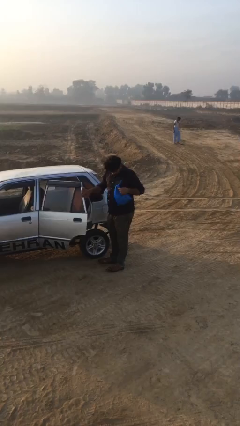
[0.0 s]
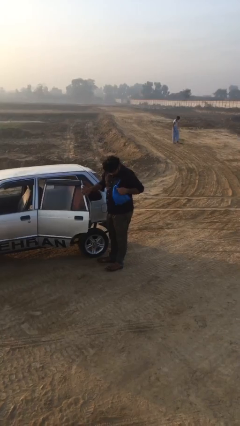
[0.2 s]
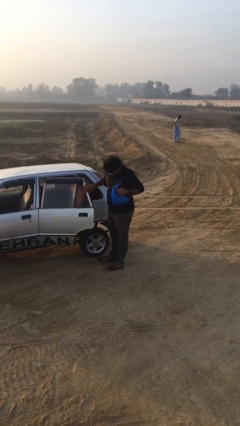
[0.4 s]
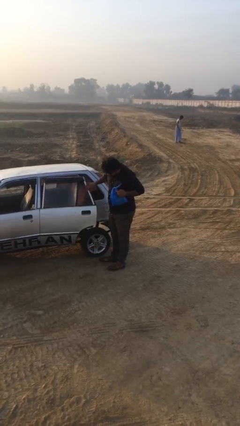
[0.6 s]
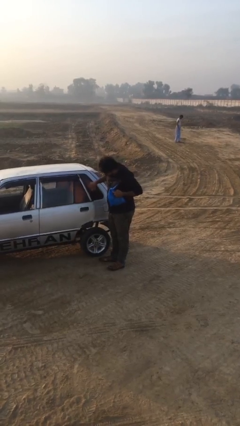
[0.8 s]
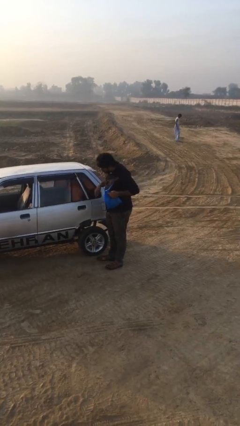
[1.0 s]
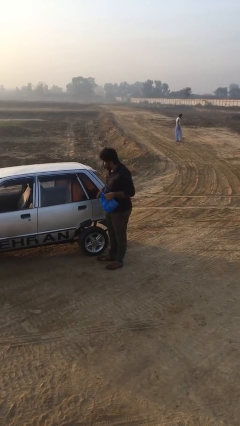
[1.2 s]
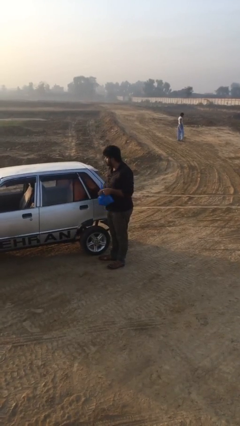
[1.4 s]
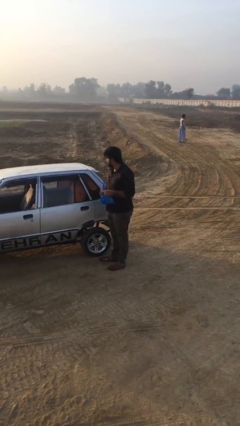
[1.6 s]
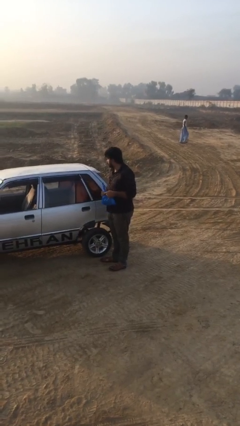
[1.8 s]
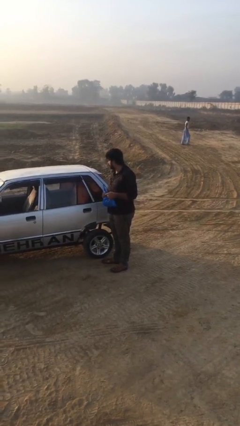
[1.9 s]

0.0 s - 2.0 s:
person closes car door

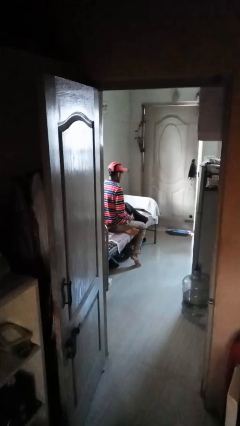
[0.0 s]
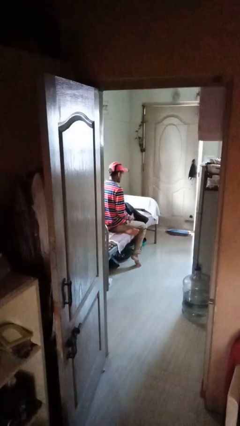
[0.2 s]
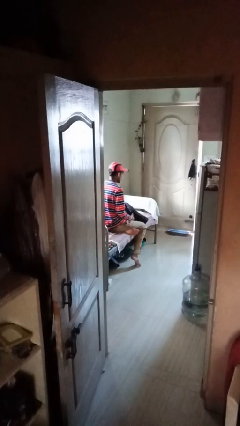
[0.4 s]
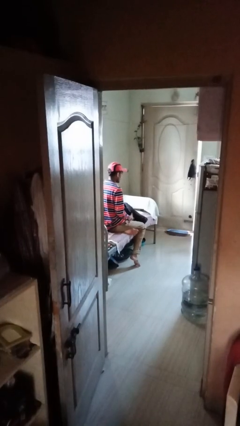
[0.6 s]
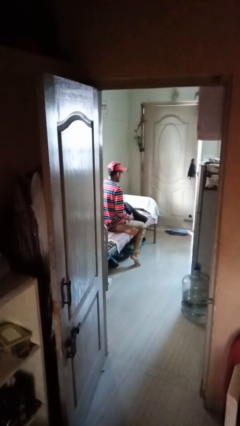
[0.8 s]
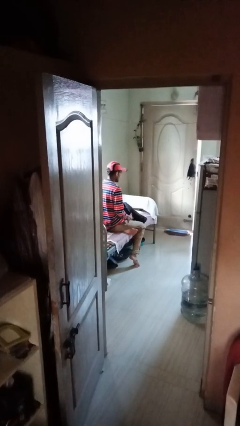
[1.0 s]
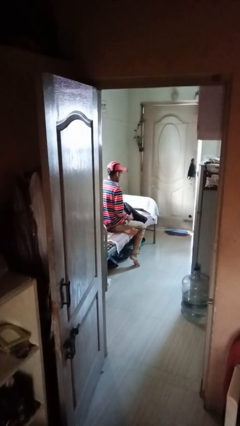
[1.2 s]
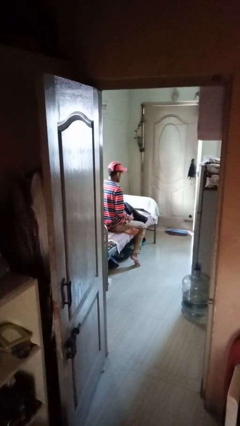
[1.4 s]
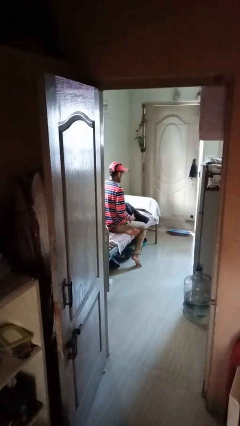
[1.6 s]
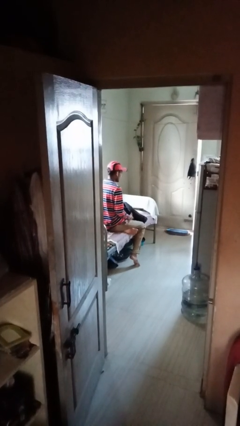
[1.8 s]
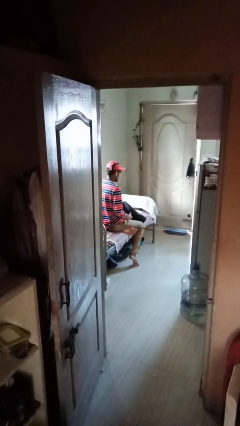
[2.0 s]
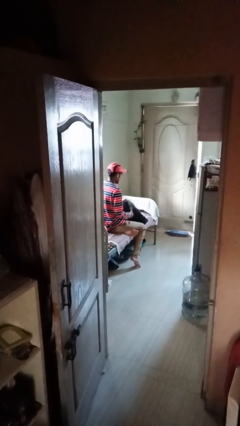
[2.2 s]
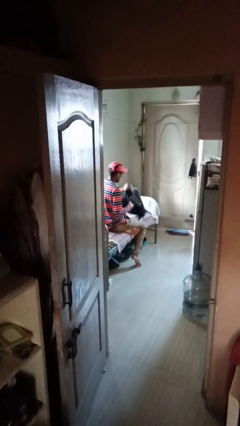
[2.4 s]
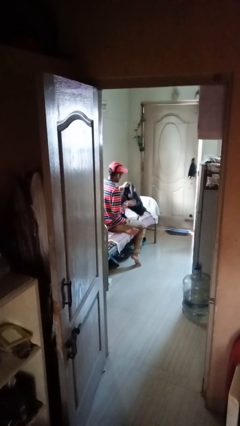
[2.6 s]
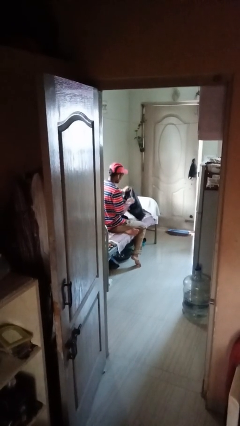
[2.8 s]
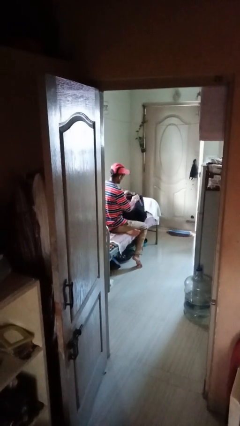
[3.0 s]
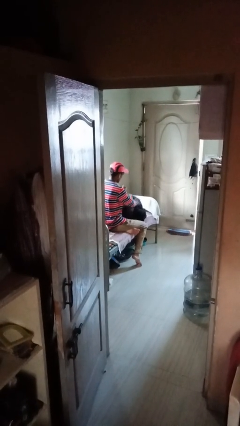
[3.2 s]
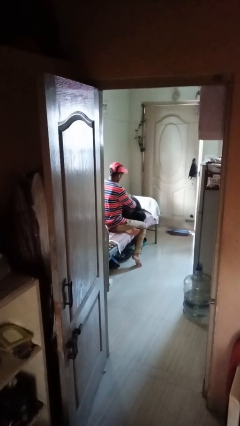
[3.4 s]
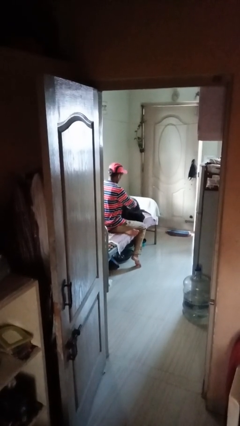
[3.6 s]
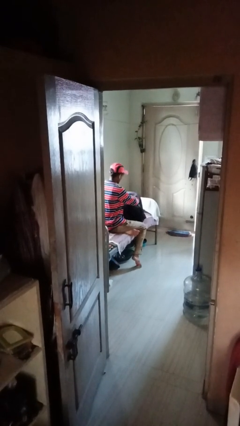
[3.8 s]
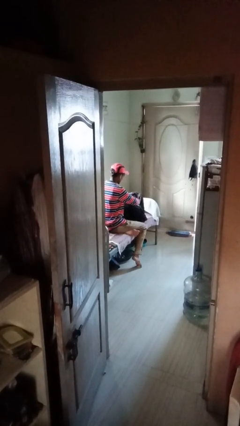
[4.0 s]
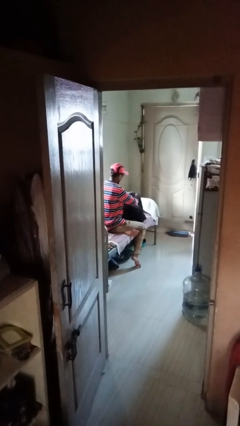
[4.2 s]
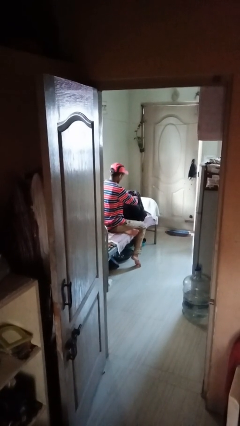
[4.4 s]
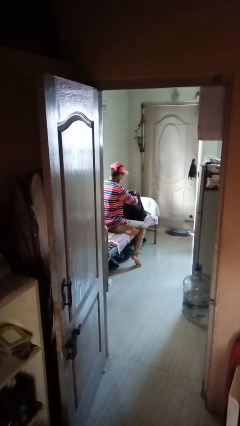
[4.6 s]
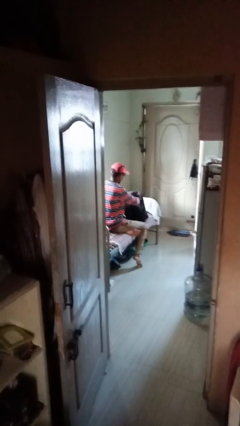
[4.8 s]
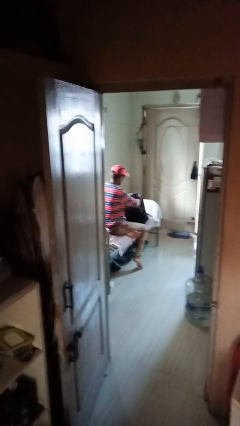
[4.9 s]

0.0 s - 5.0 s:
person searches in backpack

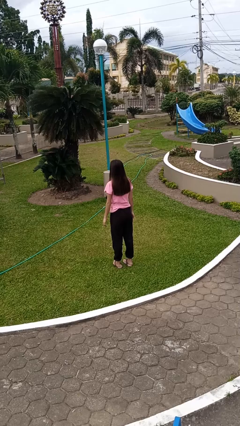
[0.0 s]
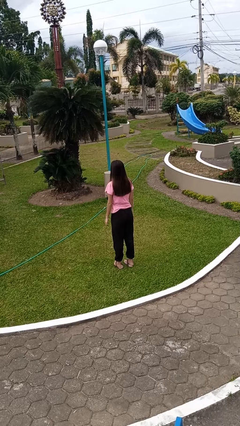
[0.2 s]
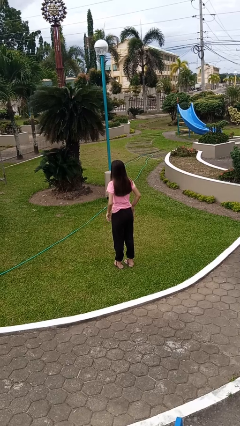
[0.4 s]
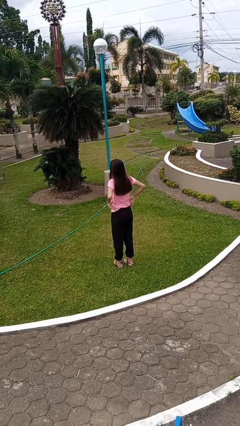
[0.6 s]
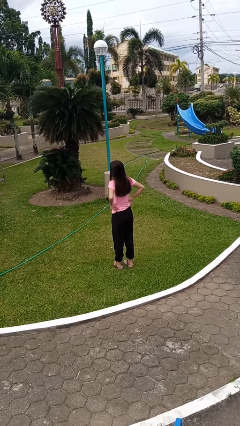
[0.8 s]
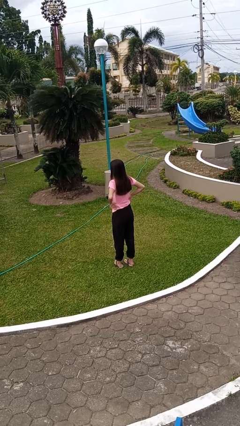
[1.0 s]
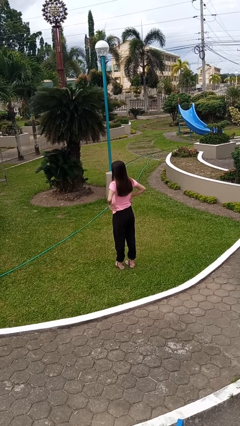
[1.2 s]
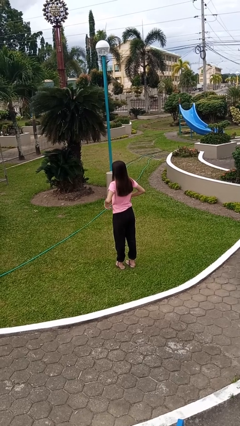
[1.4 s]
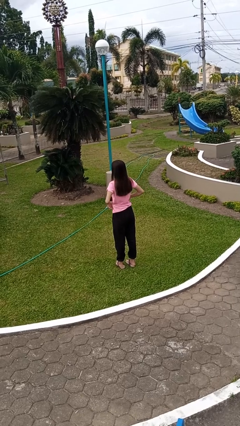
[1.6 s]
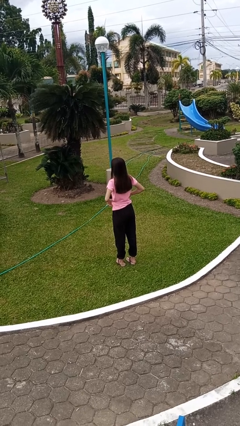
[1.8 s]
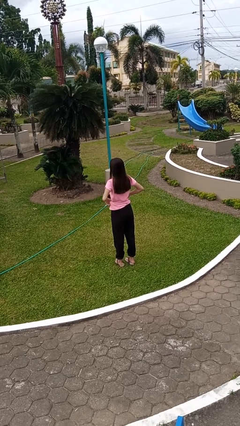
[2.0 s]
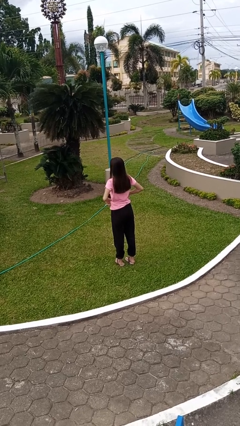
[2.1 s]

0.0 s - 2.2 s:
person hikes up pants

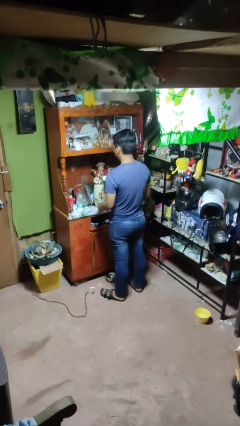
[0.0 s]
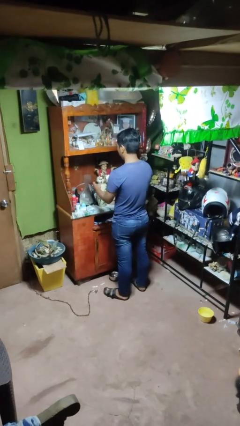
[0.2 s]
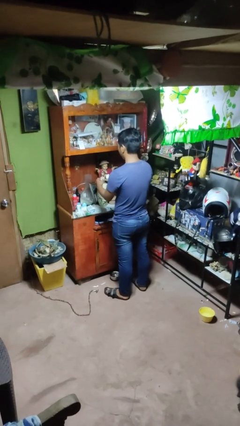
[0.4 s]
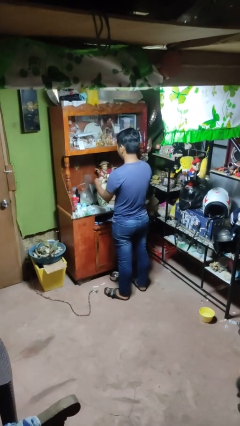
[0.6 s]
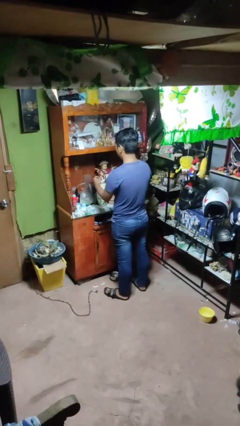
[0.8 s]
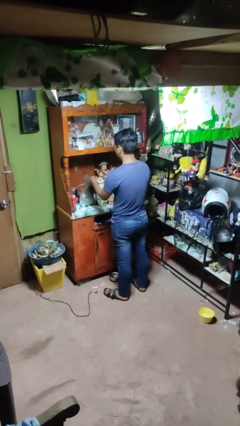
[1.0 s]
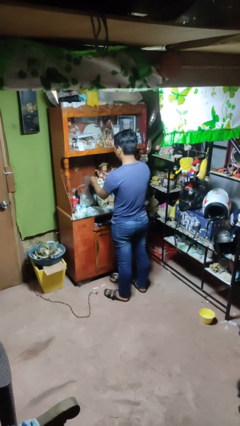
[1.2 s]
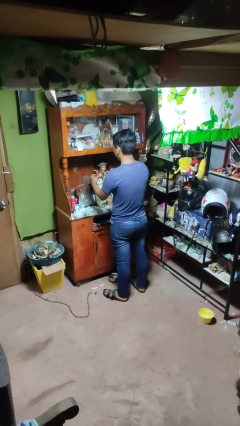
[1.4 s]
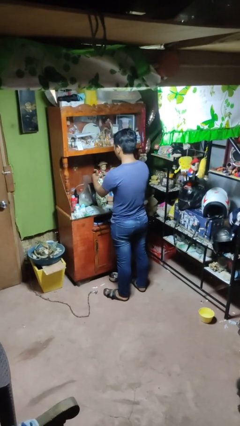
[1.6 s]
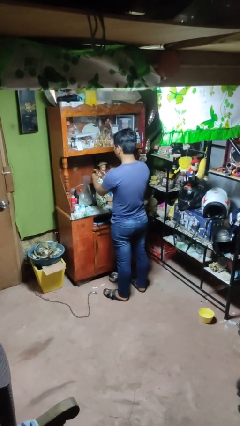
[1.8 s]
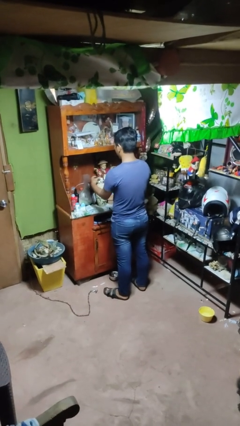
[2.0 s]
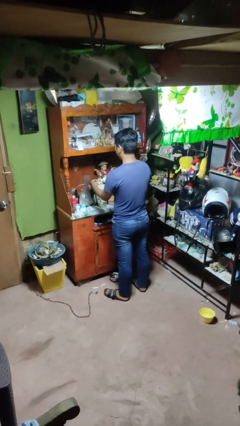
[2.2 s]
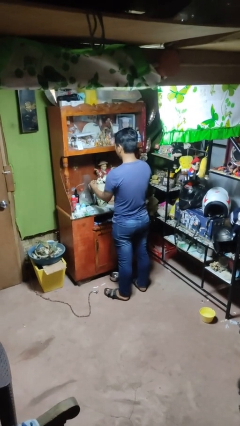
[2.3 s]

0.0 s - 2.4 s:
person arranges flowers in vase

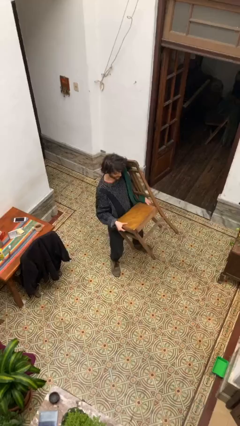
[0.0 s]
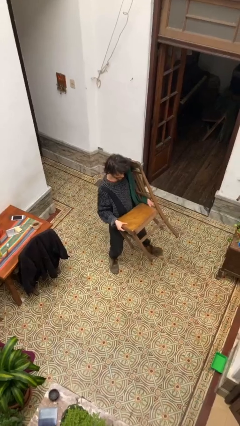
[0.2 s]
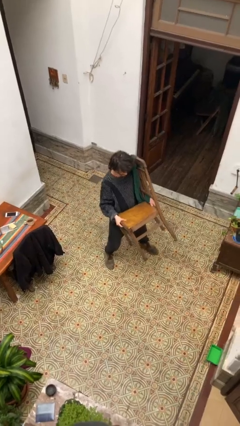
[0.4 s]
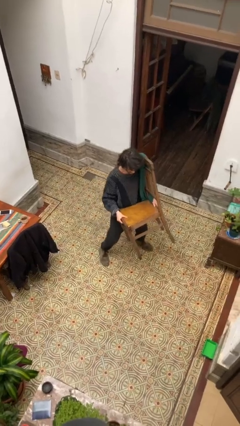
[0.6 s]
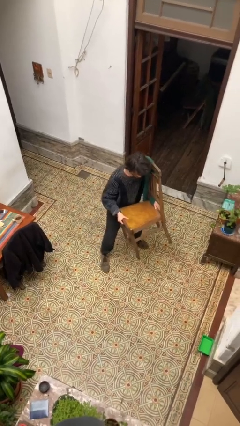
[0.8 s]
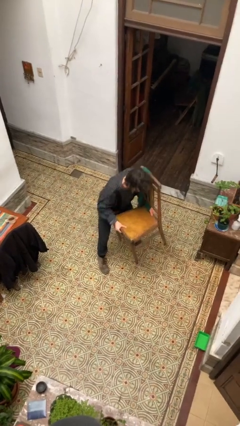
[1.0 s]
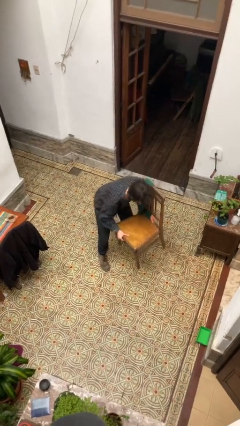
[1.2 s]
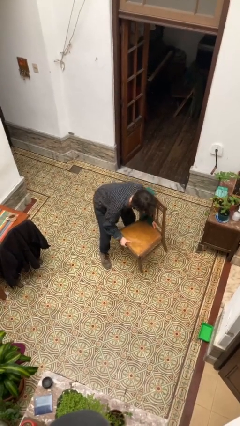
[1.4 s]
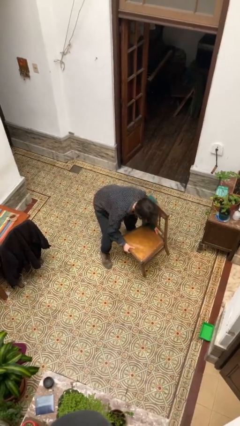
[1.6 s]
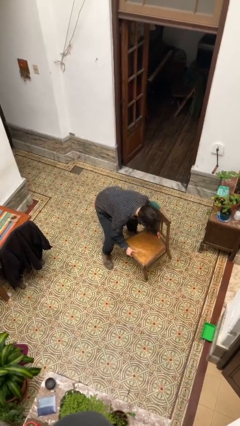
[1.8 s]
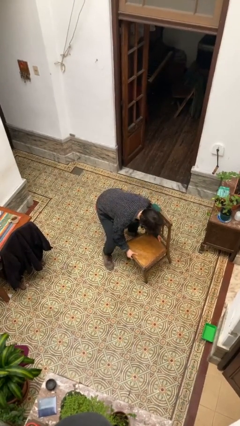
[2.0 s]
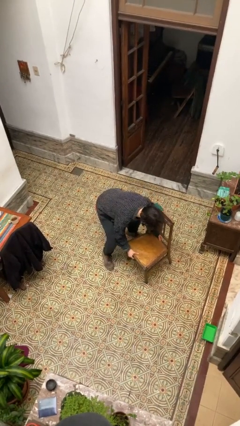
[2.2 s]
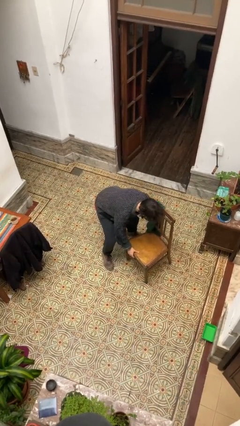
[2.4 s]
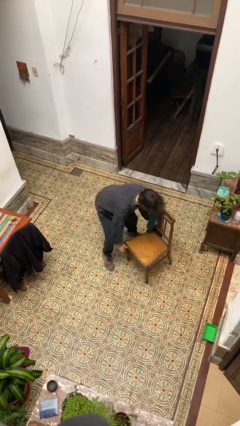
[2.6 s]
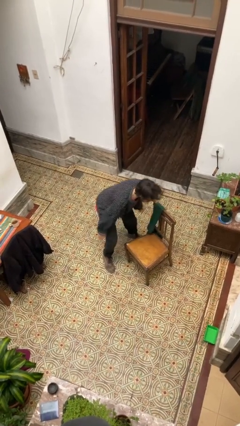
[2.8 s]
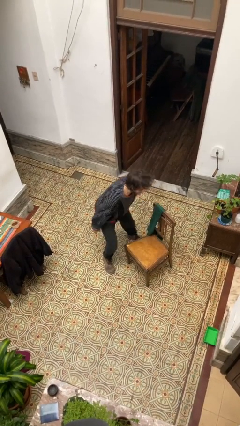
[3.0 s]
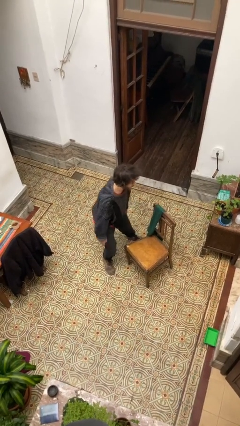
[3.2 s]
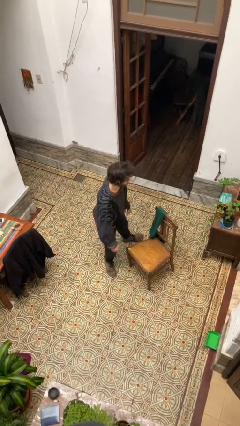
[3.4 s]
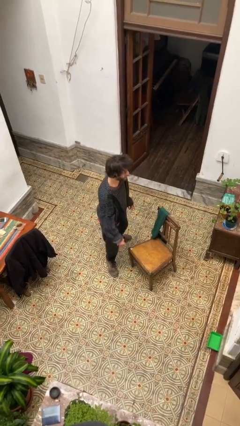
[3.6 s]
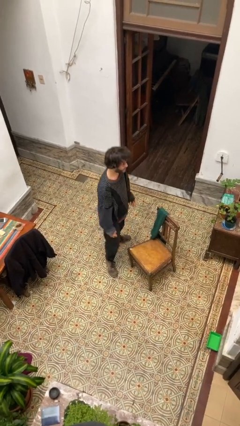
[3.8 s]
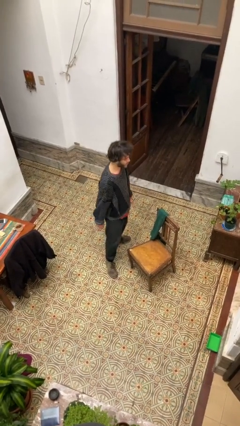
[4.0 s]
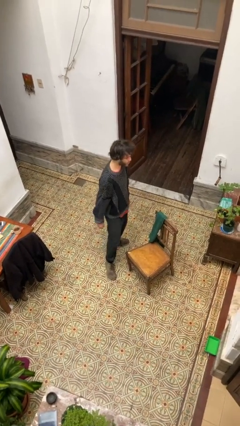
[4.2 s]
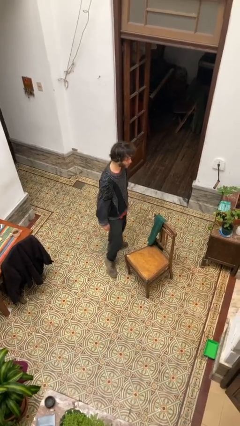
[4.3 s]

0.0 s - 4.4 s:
person puts down object on floor

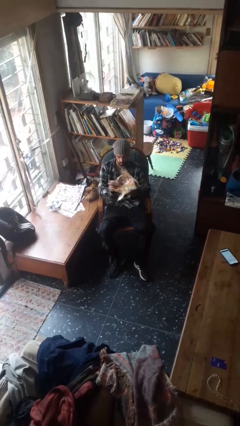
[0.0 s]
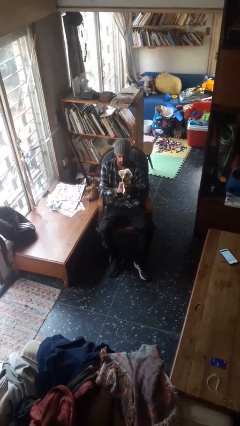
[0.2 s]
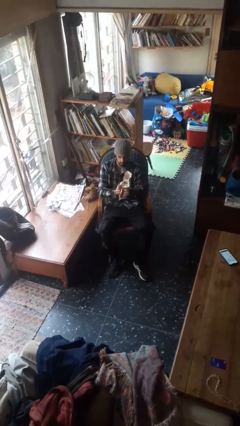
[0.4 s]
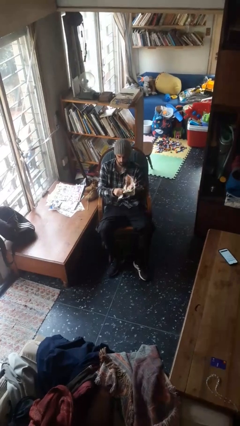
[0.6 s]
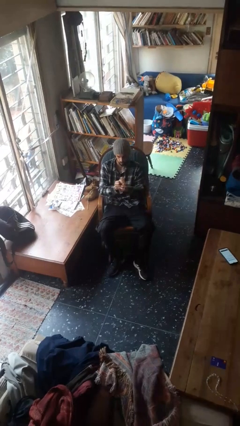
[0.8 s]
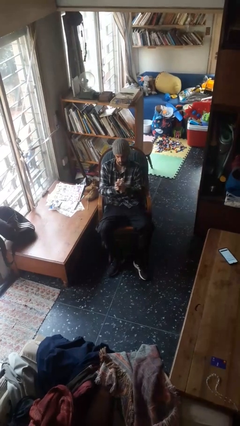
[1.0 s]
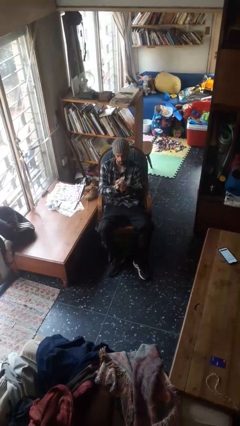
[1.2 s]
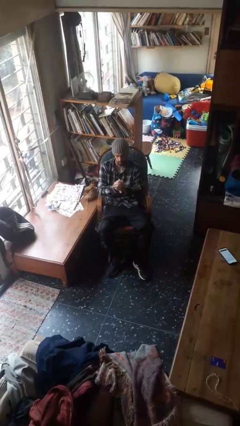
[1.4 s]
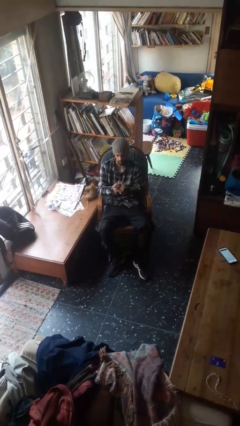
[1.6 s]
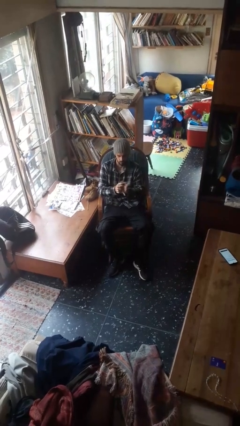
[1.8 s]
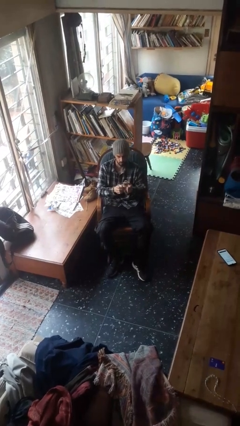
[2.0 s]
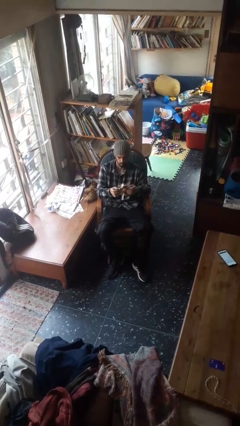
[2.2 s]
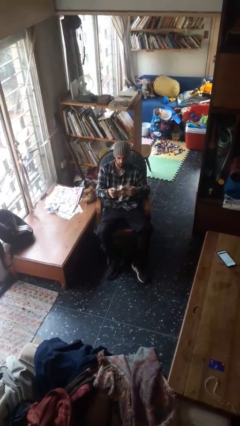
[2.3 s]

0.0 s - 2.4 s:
person crumples paper
